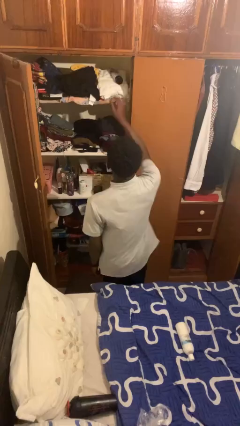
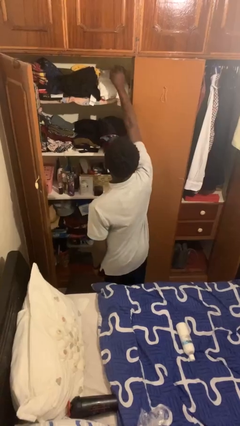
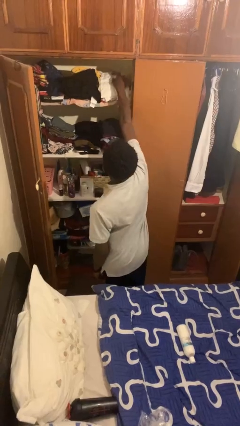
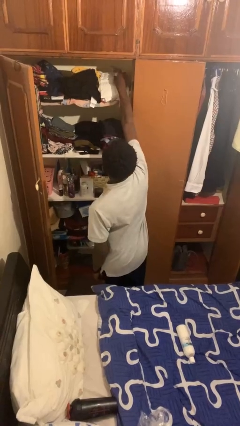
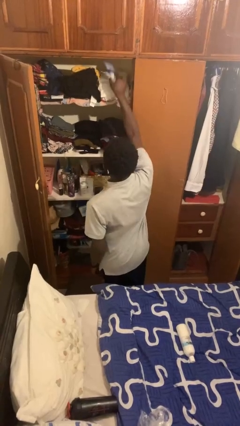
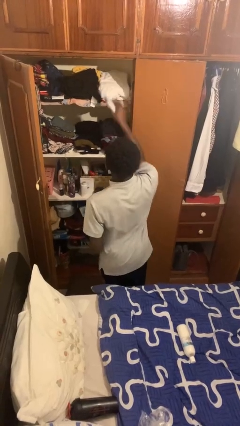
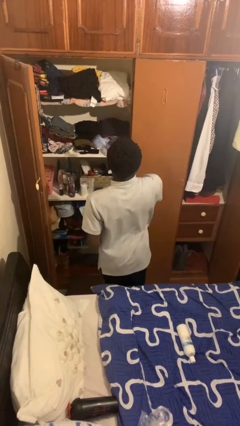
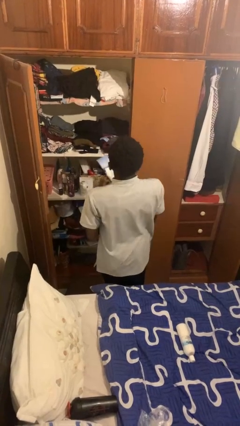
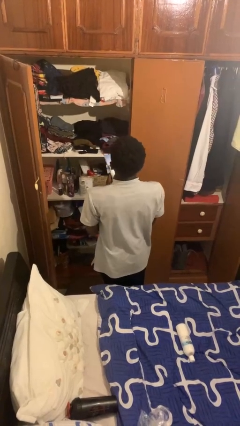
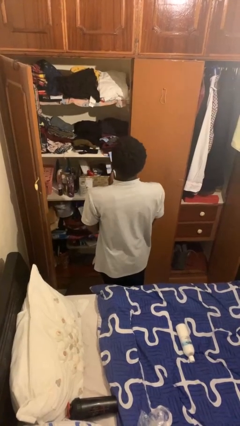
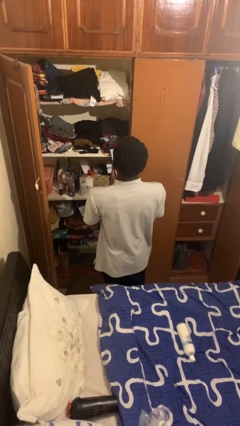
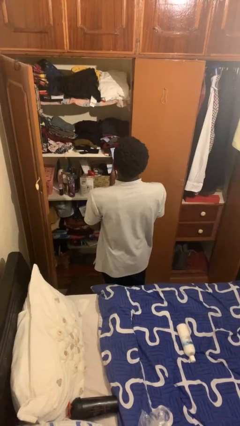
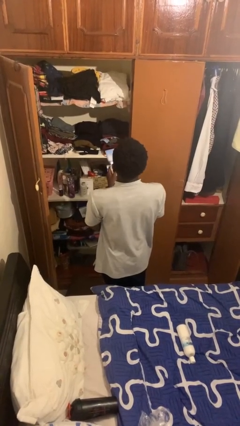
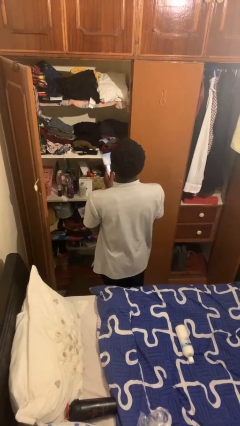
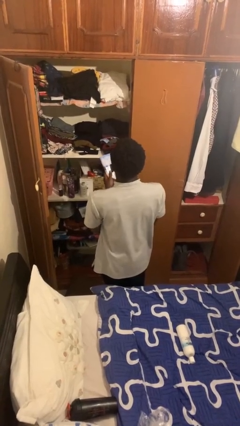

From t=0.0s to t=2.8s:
person picks up object from shelf

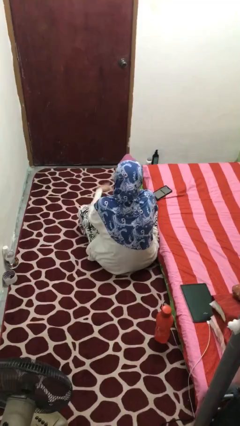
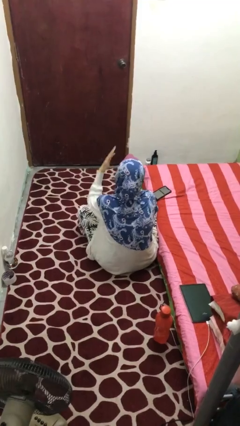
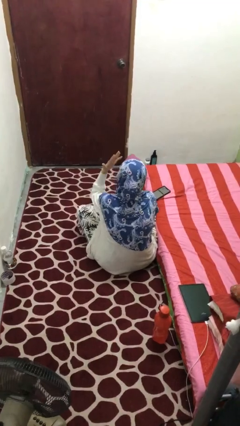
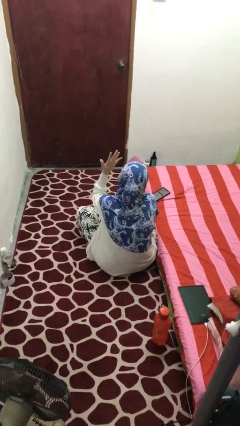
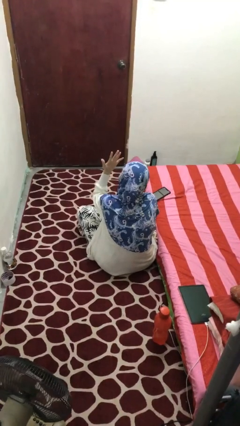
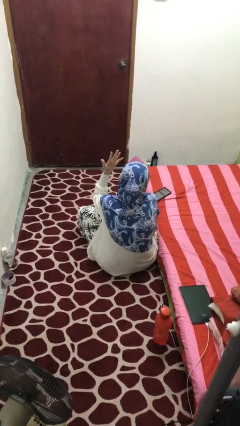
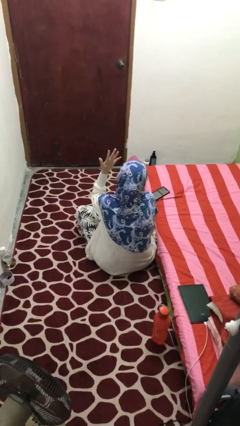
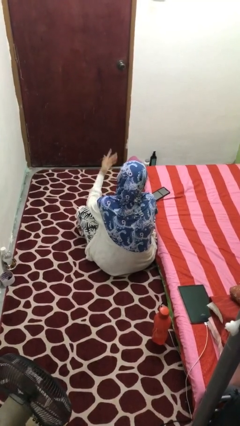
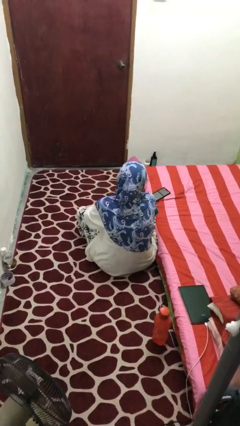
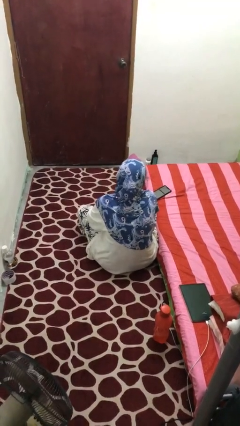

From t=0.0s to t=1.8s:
person gestures number five

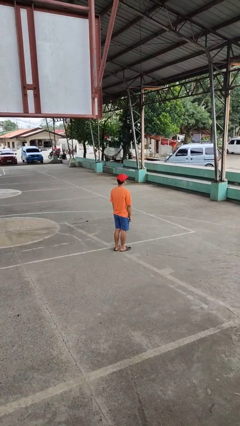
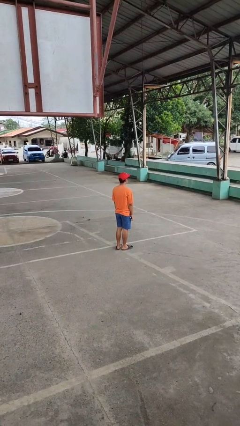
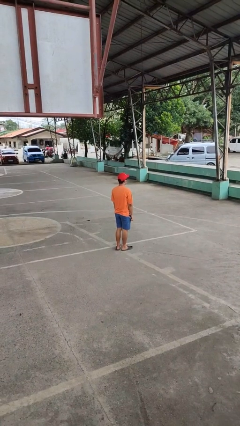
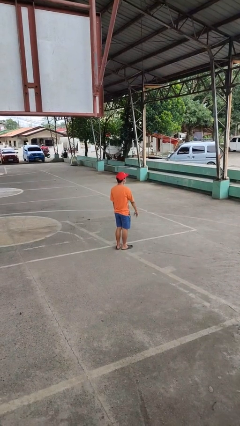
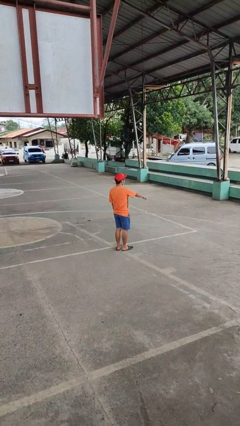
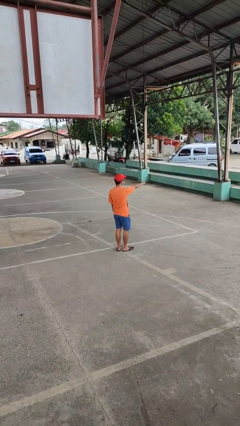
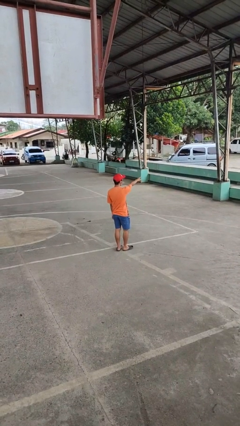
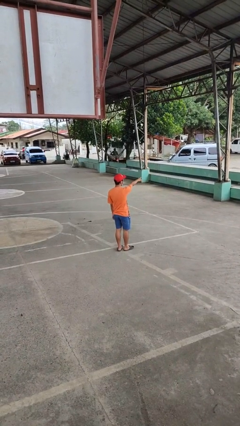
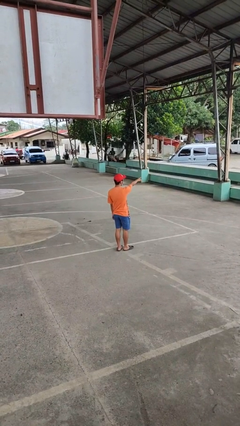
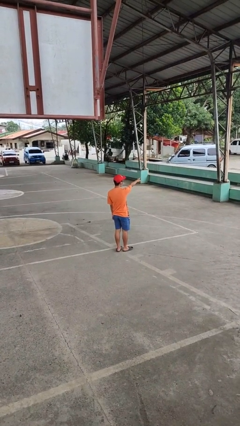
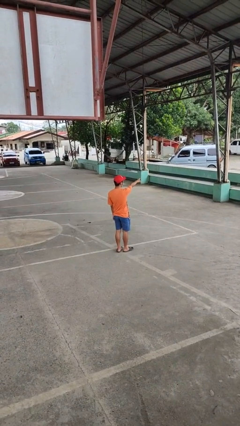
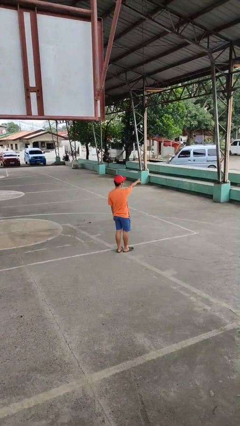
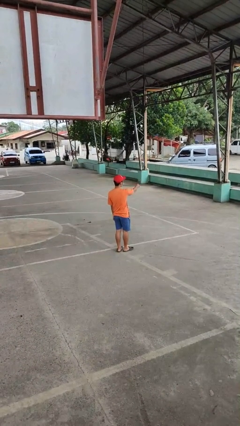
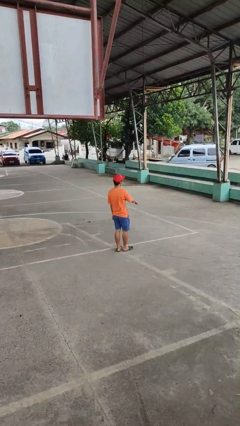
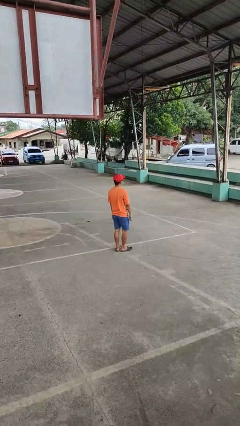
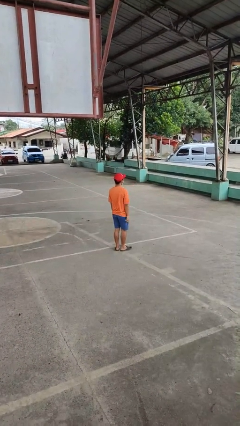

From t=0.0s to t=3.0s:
person points at person

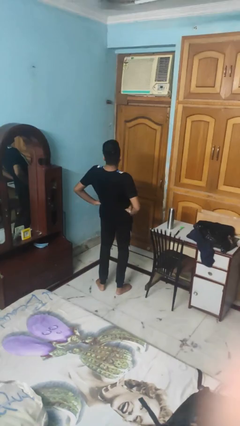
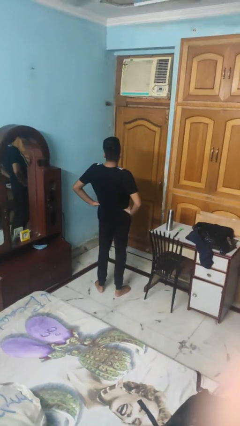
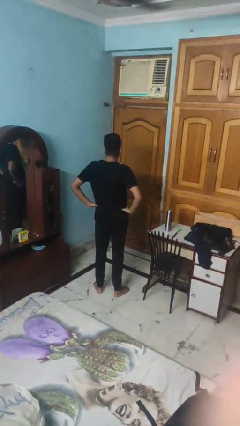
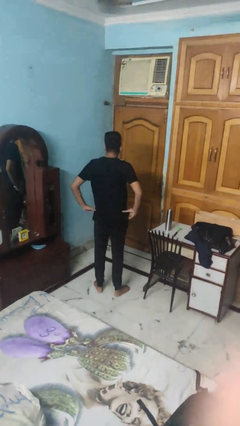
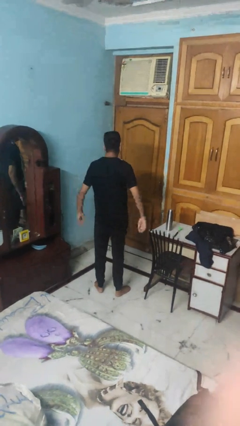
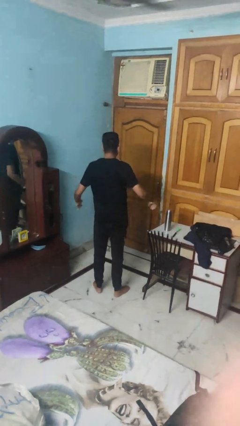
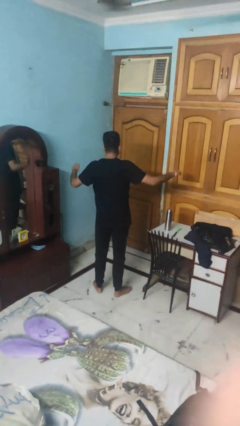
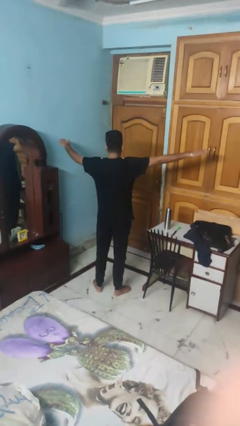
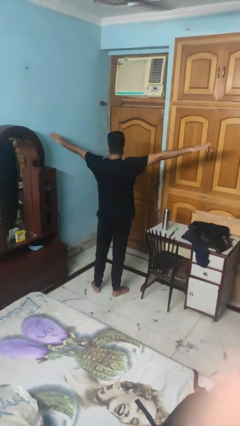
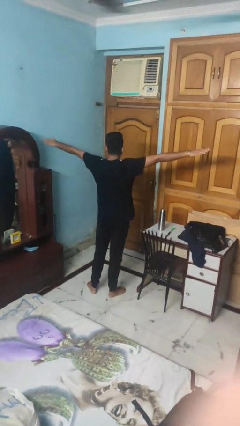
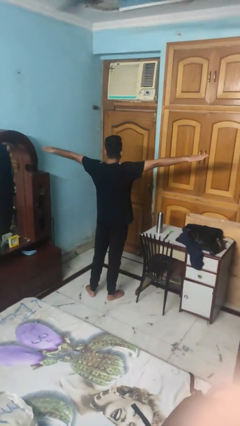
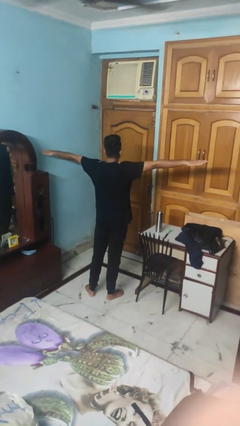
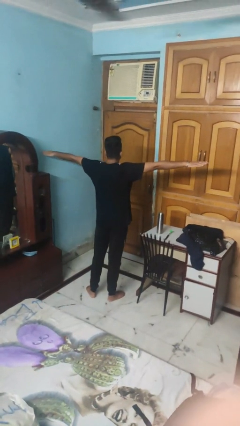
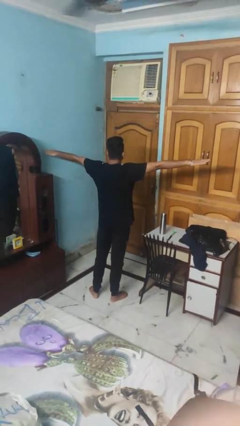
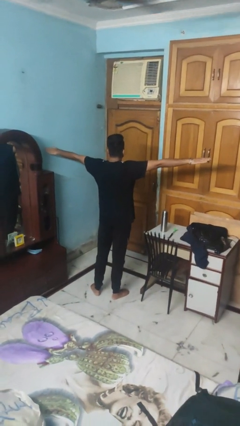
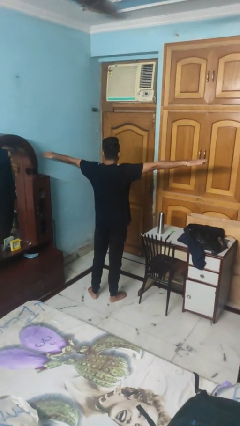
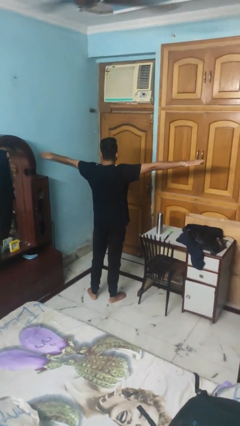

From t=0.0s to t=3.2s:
person stretches arms to side

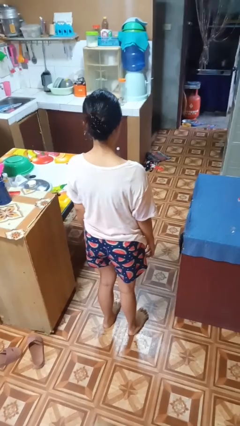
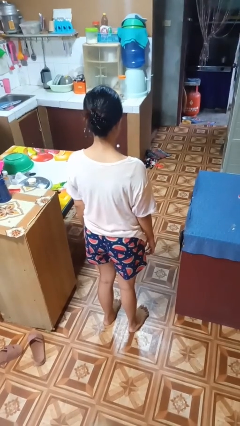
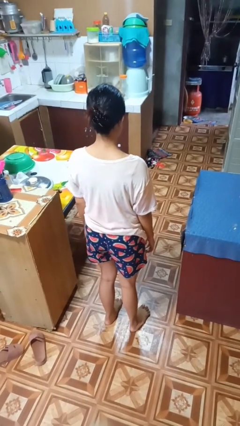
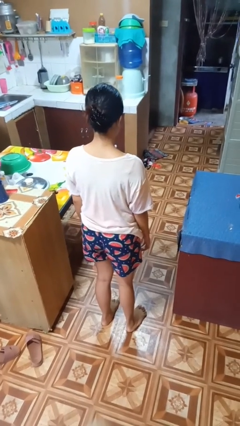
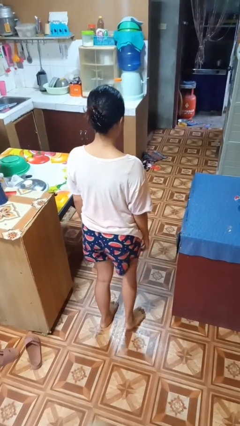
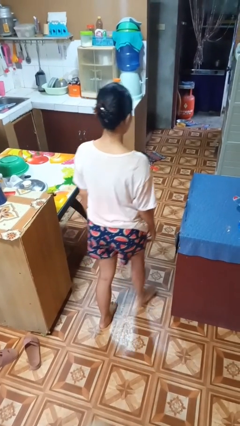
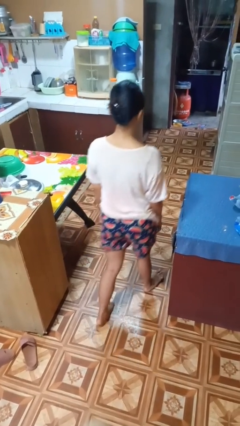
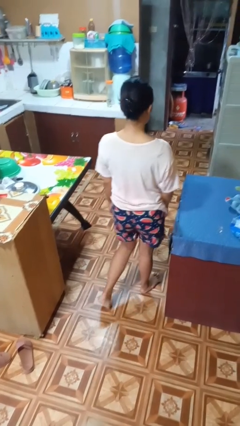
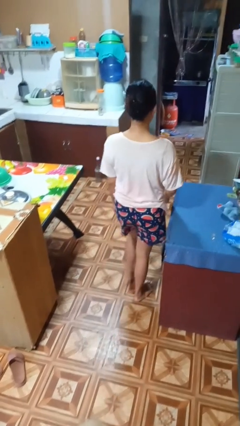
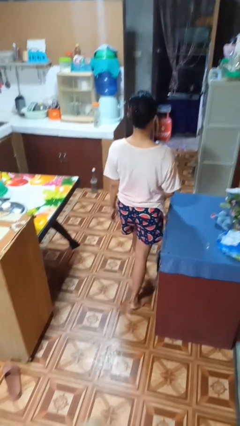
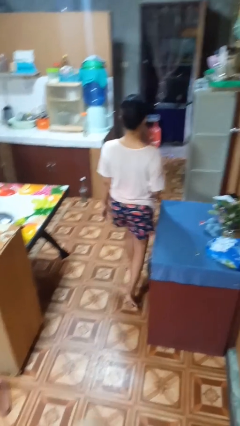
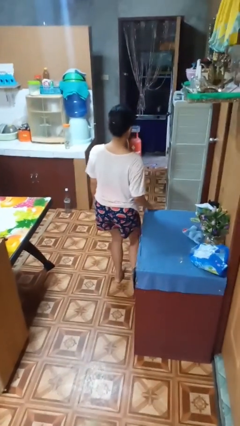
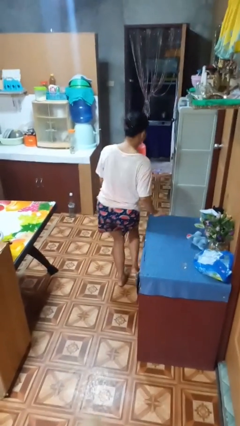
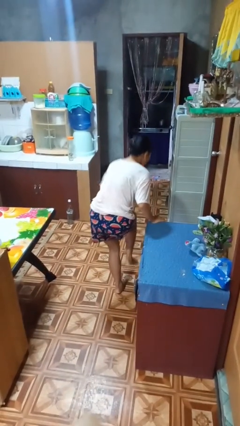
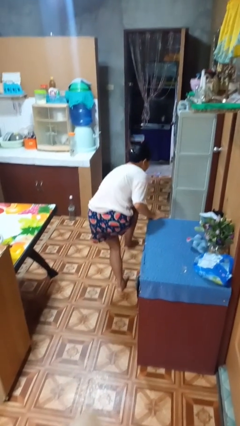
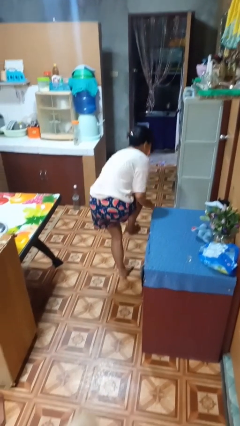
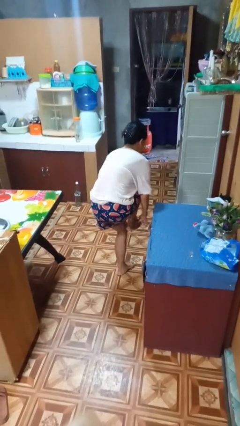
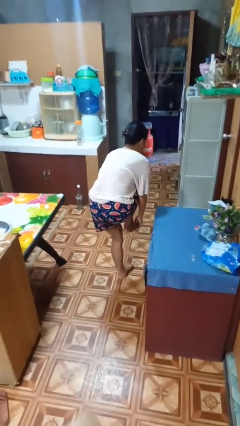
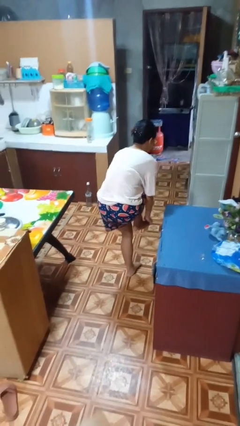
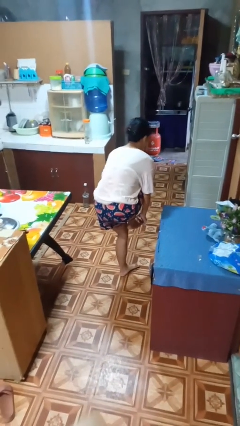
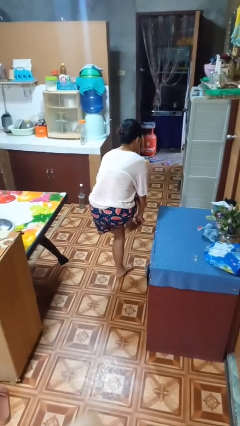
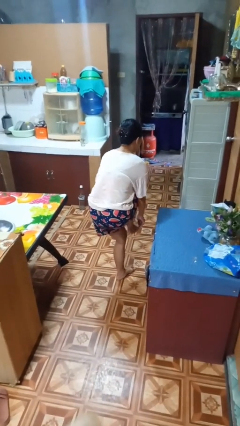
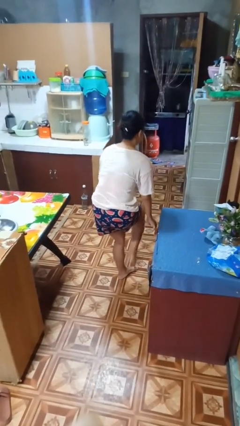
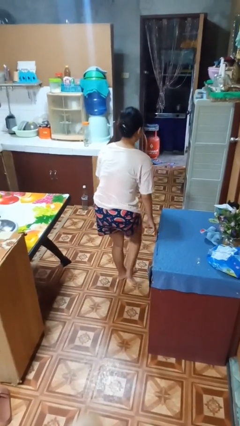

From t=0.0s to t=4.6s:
person stubs toe

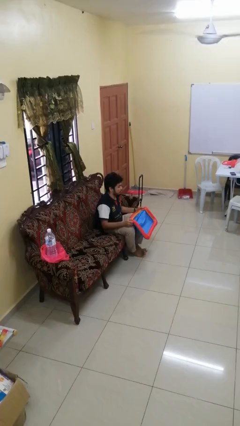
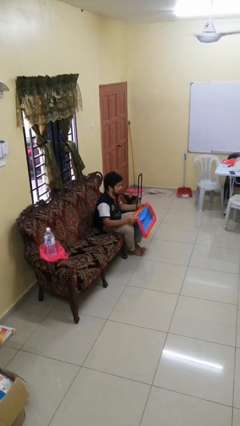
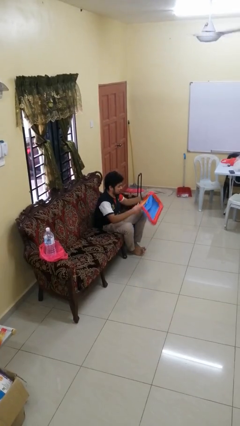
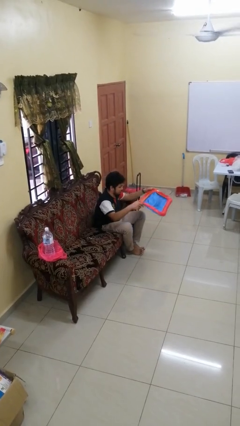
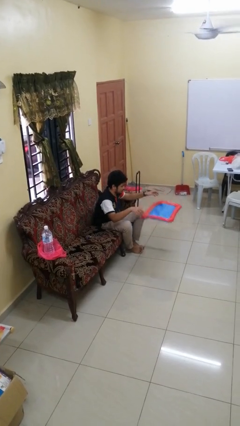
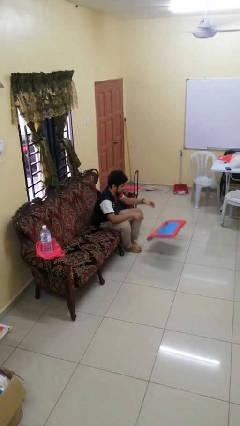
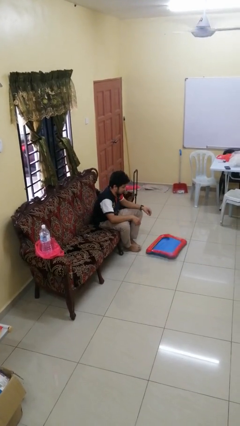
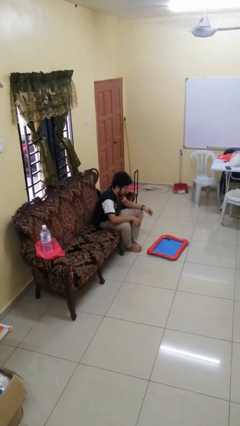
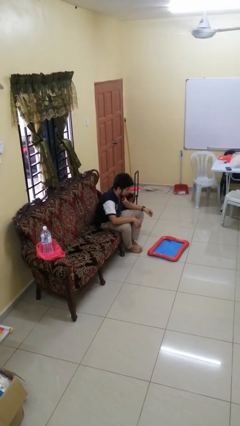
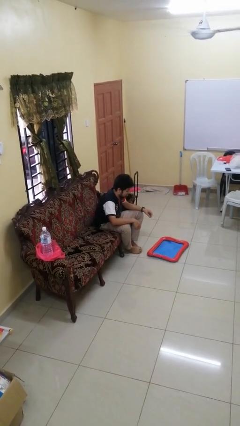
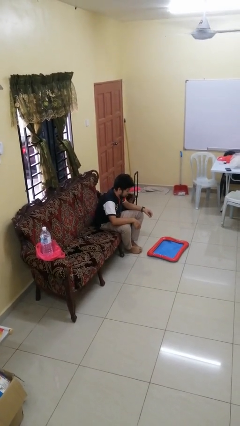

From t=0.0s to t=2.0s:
person drops object

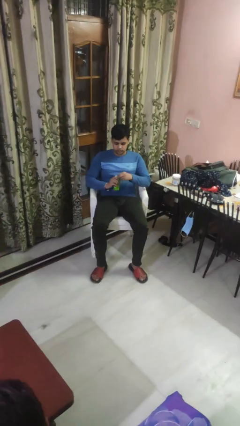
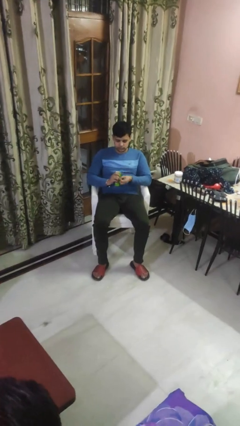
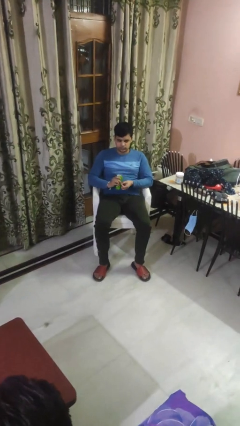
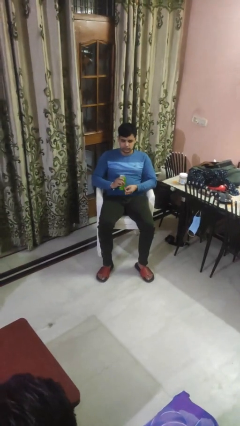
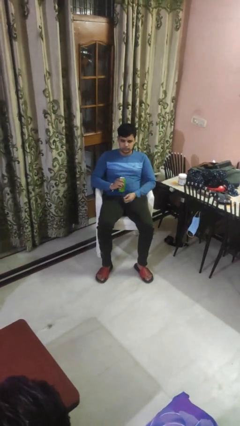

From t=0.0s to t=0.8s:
person opens beverage can
